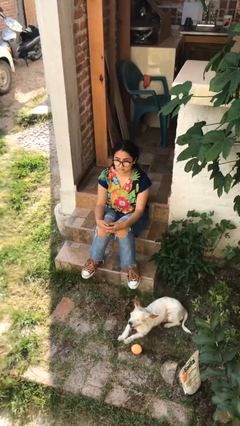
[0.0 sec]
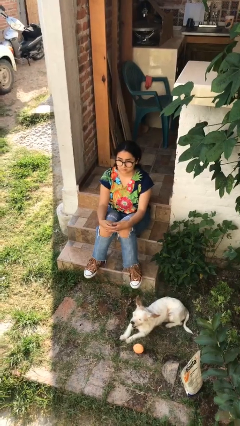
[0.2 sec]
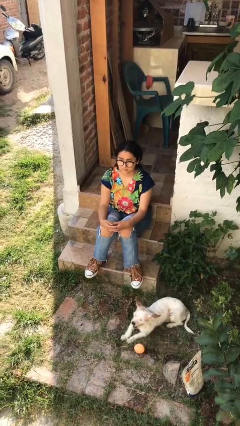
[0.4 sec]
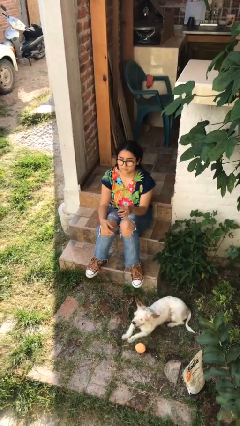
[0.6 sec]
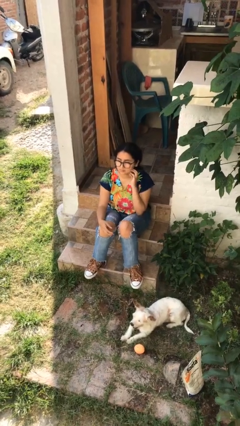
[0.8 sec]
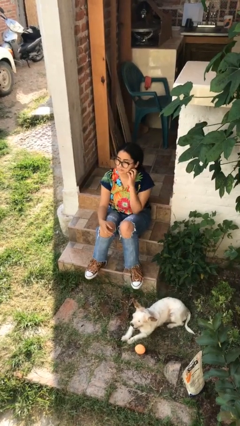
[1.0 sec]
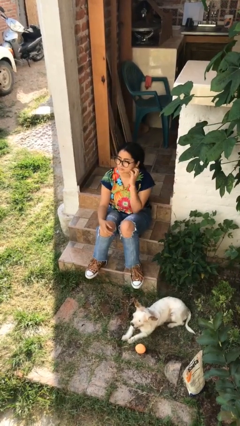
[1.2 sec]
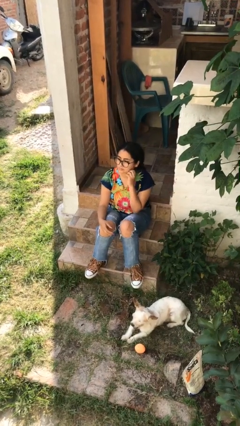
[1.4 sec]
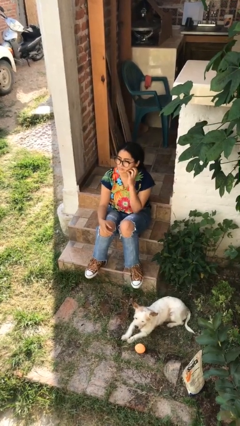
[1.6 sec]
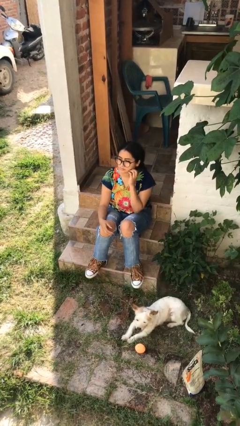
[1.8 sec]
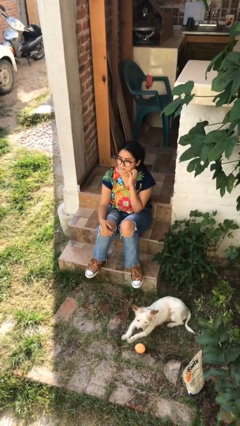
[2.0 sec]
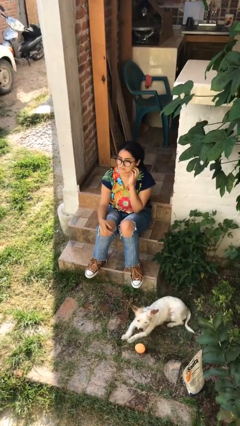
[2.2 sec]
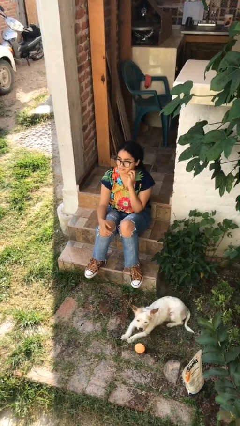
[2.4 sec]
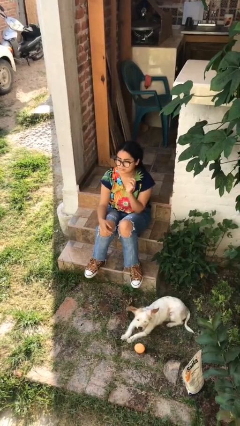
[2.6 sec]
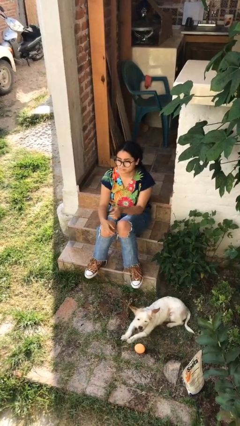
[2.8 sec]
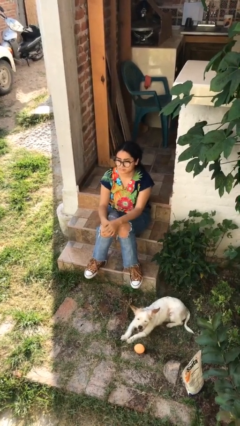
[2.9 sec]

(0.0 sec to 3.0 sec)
person scratches face

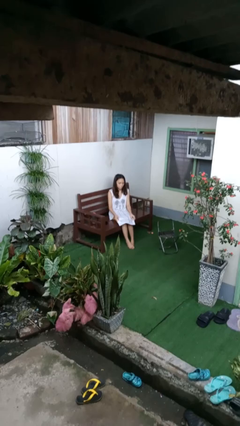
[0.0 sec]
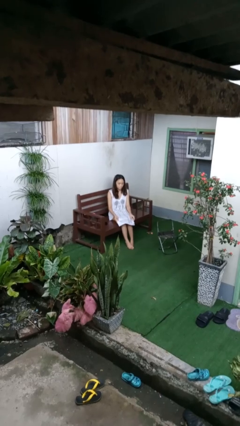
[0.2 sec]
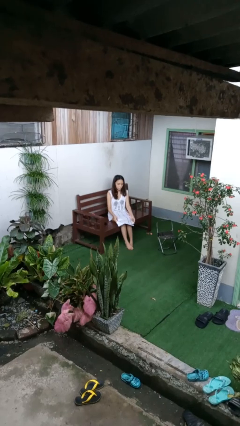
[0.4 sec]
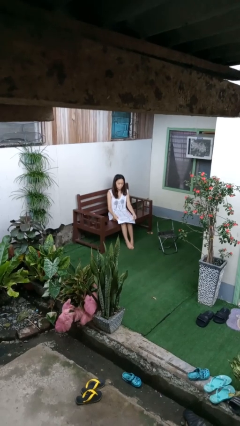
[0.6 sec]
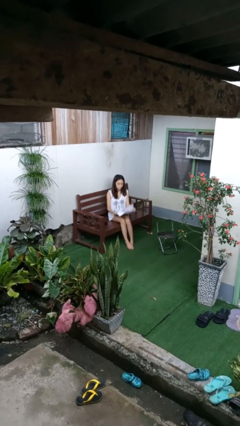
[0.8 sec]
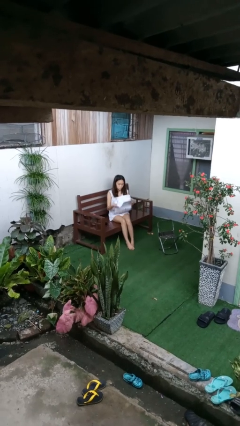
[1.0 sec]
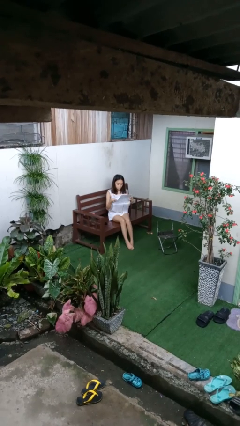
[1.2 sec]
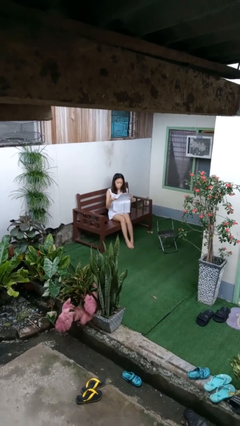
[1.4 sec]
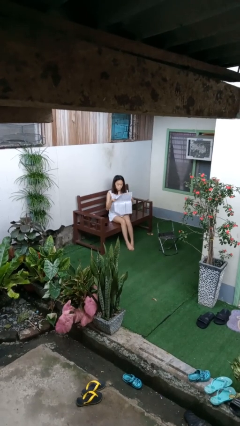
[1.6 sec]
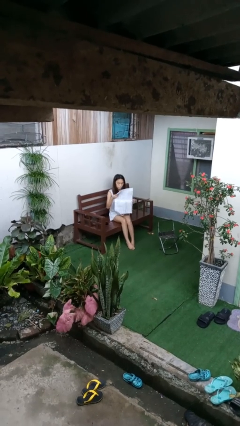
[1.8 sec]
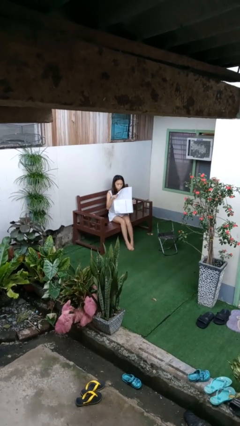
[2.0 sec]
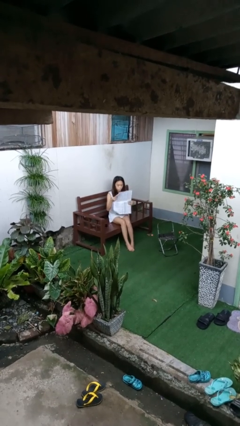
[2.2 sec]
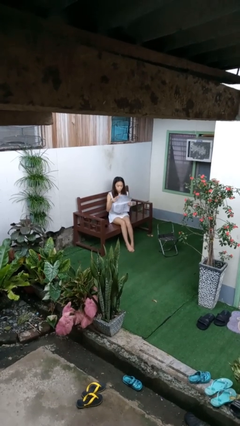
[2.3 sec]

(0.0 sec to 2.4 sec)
person reads newspaper

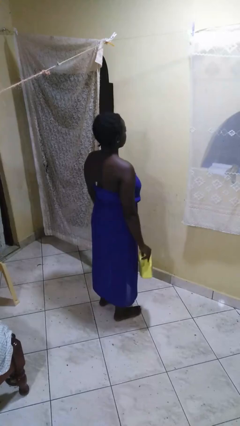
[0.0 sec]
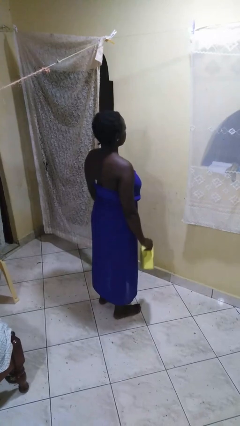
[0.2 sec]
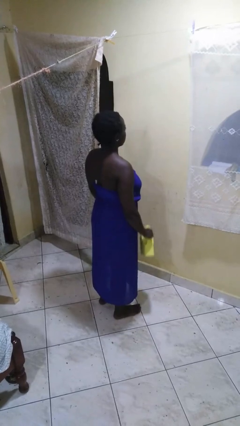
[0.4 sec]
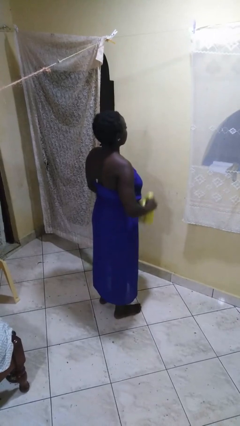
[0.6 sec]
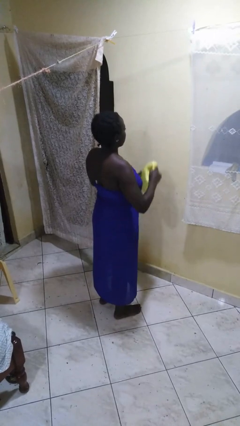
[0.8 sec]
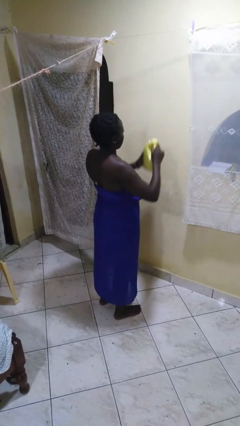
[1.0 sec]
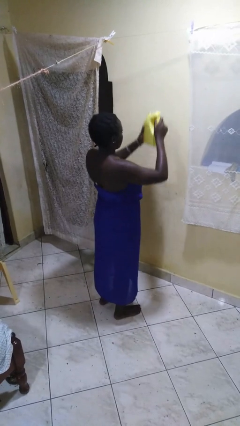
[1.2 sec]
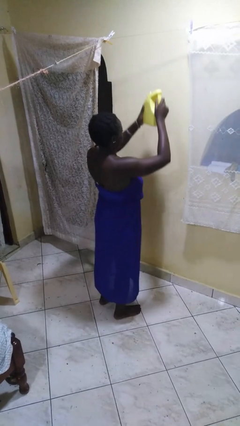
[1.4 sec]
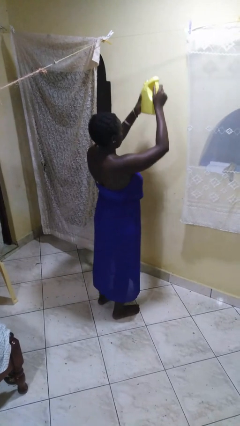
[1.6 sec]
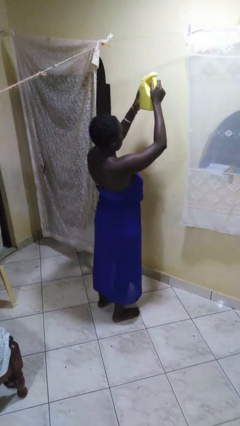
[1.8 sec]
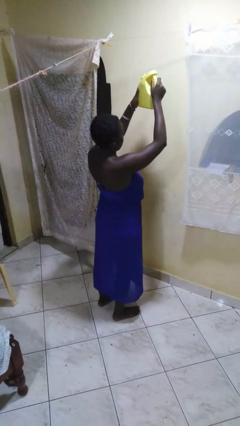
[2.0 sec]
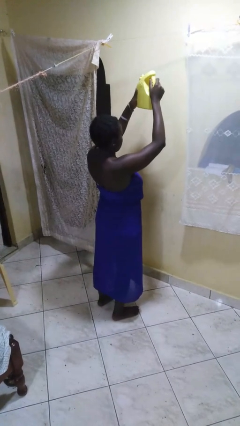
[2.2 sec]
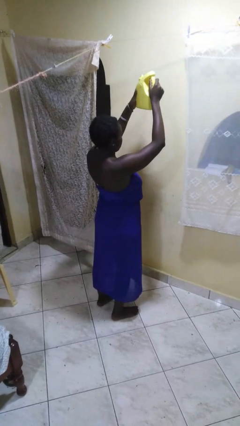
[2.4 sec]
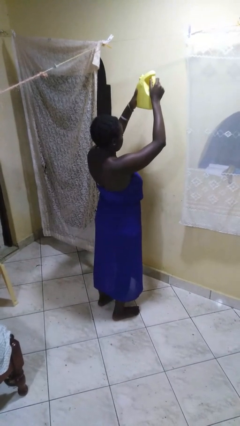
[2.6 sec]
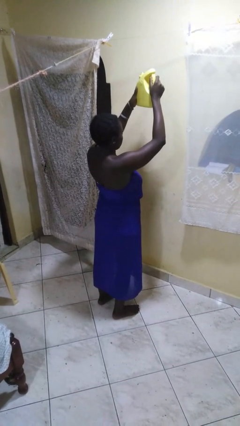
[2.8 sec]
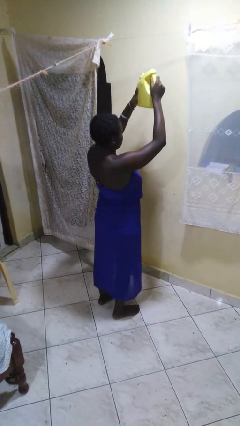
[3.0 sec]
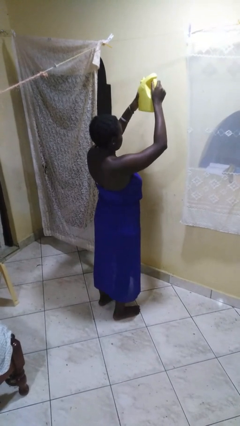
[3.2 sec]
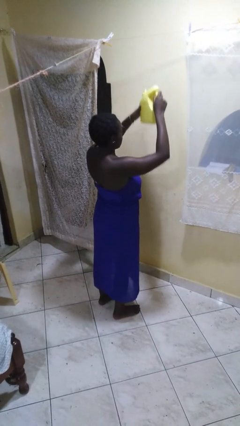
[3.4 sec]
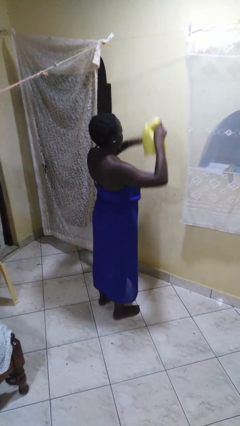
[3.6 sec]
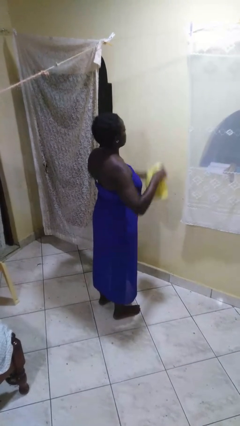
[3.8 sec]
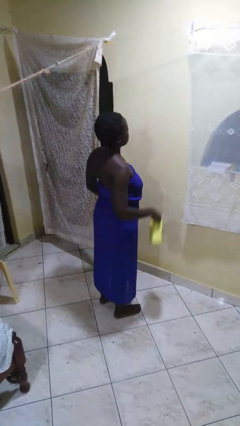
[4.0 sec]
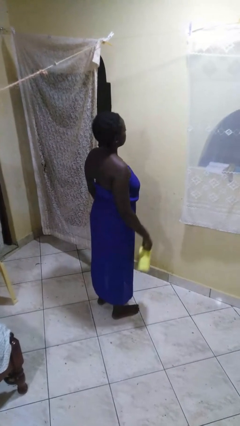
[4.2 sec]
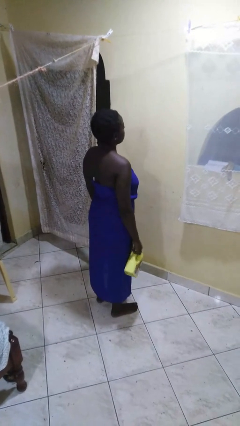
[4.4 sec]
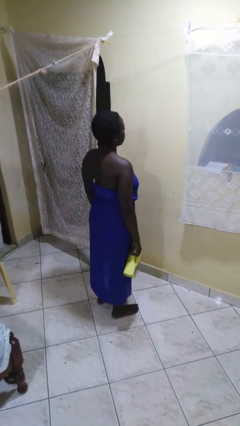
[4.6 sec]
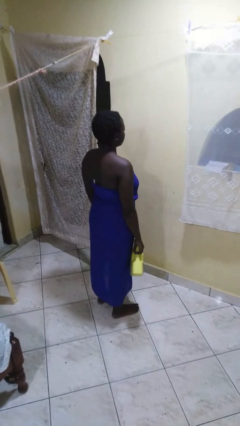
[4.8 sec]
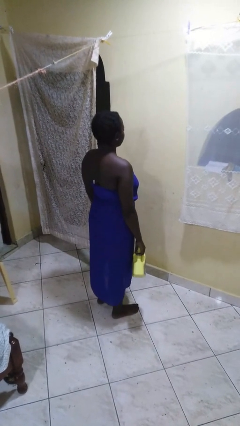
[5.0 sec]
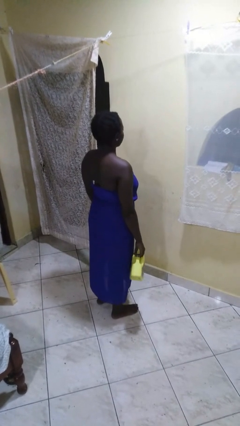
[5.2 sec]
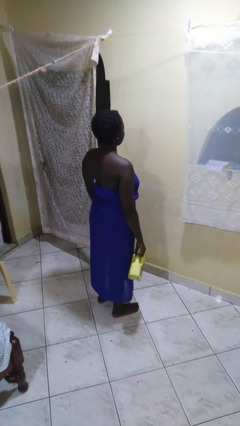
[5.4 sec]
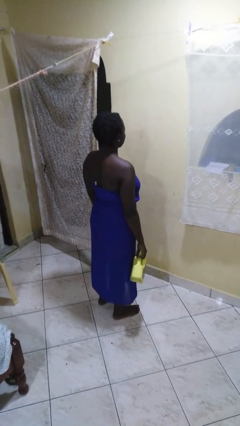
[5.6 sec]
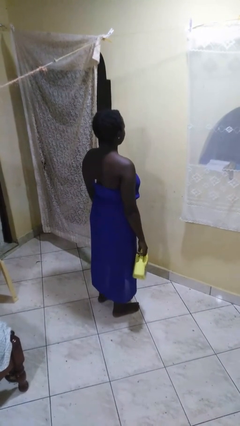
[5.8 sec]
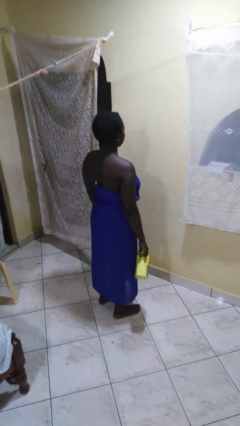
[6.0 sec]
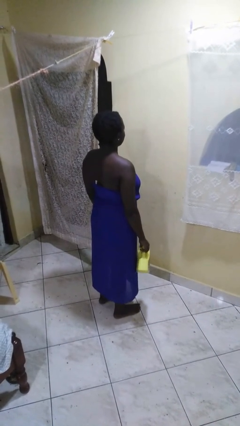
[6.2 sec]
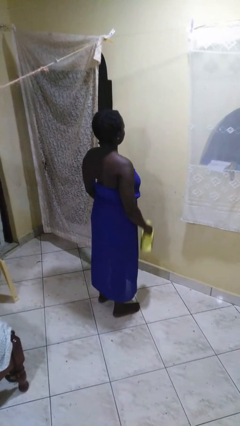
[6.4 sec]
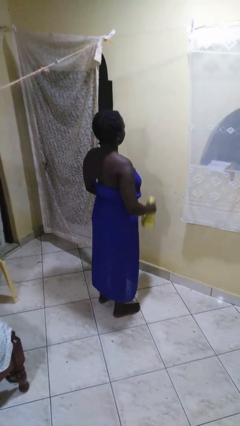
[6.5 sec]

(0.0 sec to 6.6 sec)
person holds object above head

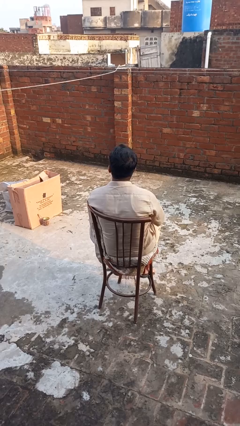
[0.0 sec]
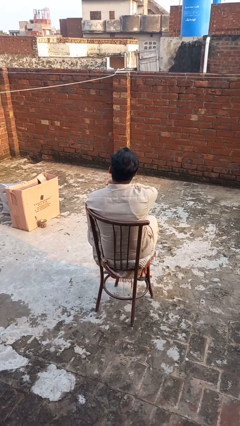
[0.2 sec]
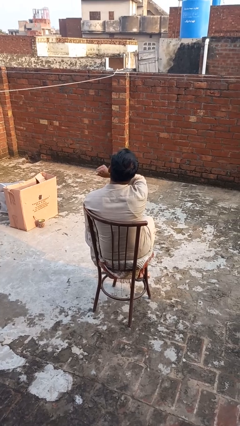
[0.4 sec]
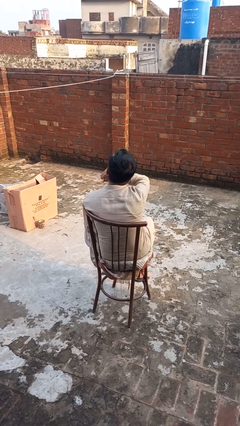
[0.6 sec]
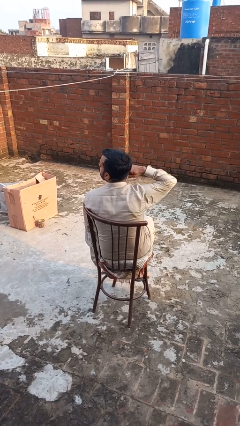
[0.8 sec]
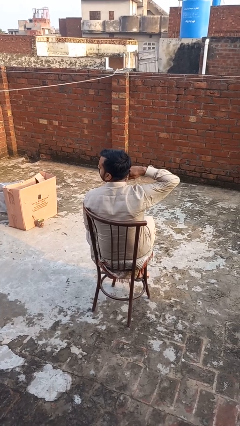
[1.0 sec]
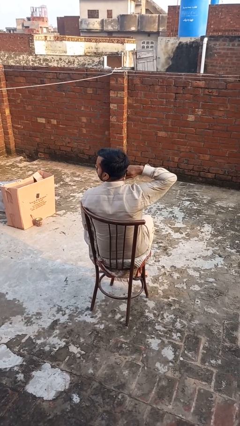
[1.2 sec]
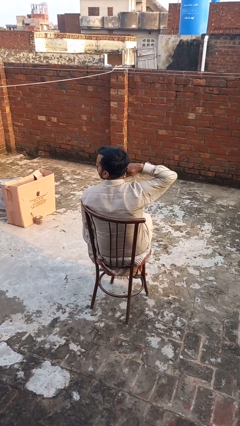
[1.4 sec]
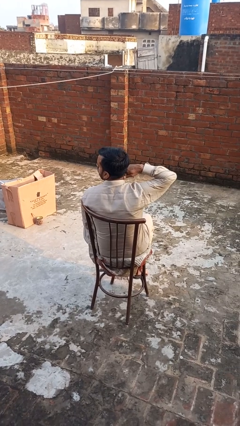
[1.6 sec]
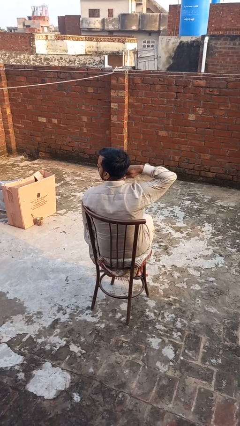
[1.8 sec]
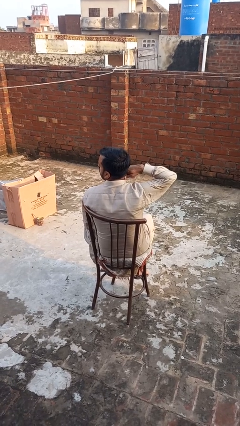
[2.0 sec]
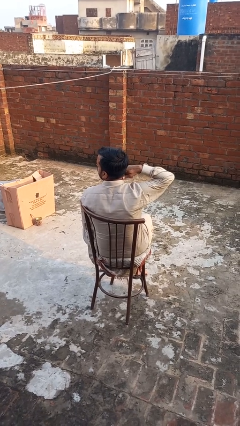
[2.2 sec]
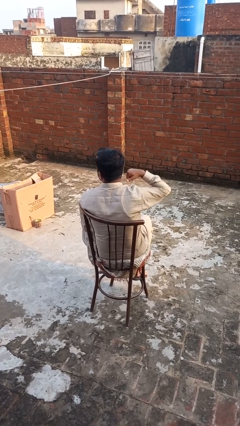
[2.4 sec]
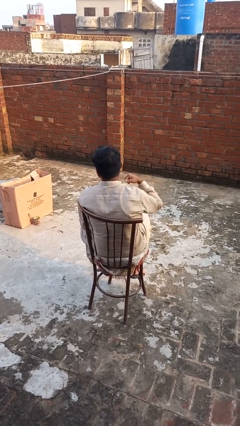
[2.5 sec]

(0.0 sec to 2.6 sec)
person gestures cut

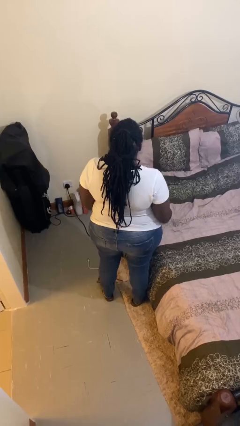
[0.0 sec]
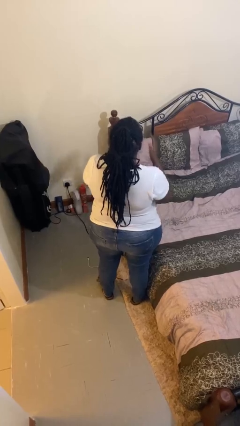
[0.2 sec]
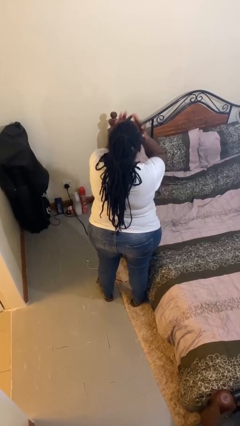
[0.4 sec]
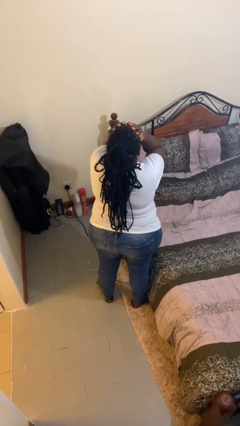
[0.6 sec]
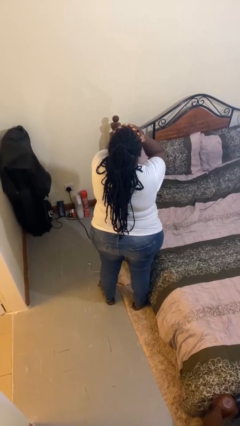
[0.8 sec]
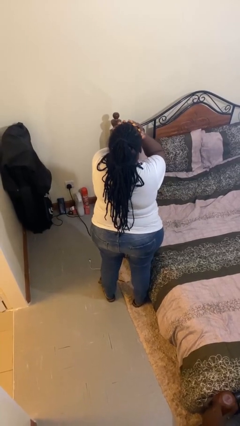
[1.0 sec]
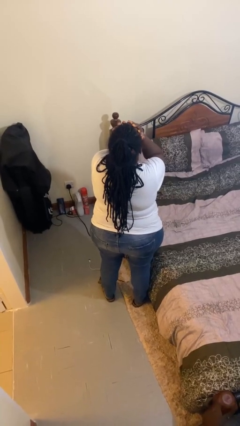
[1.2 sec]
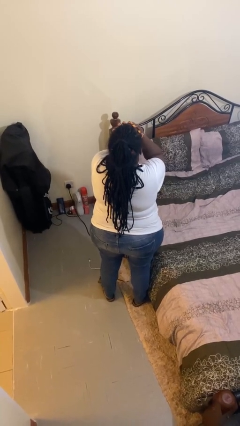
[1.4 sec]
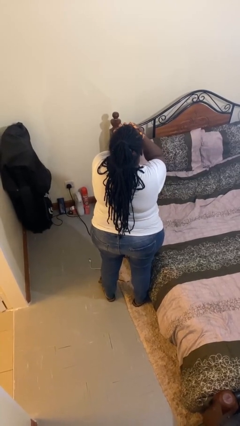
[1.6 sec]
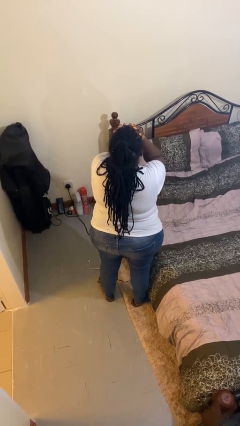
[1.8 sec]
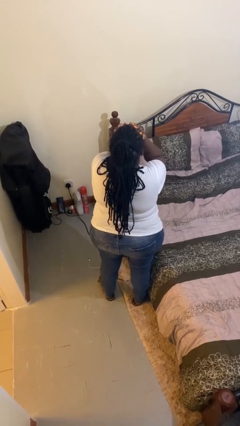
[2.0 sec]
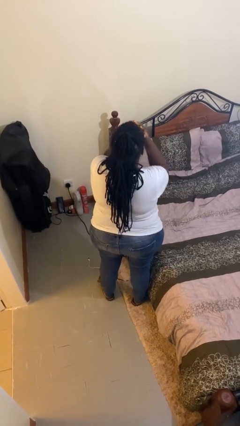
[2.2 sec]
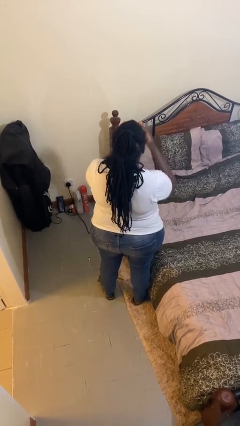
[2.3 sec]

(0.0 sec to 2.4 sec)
person covers face with hands

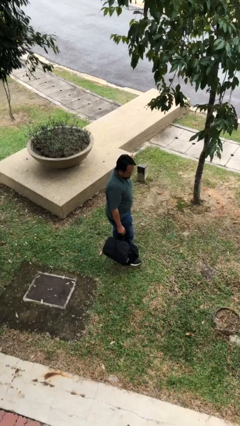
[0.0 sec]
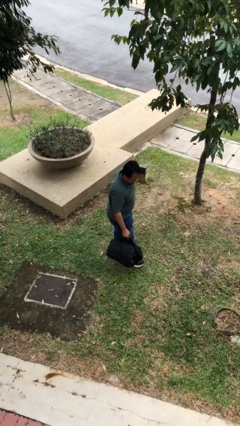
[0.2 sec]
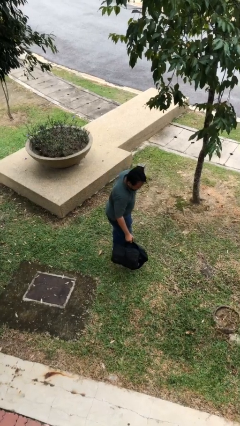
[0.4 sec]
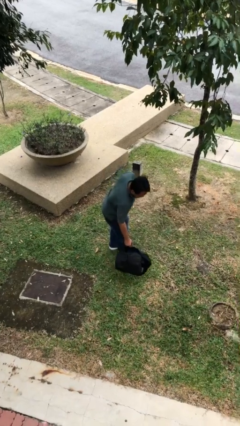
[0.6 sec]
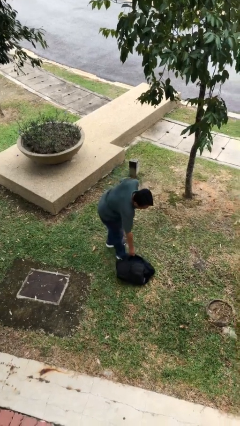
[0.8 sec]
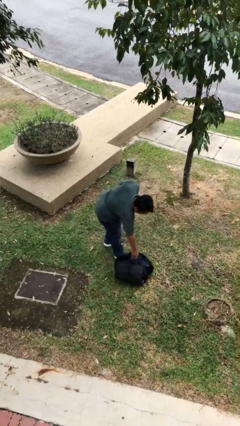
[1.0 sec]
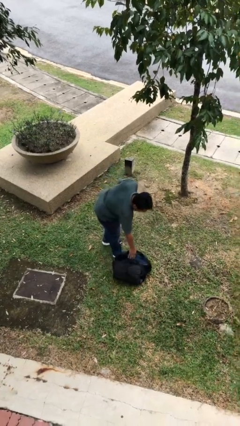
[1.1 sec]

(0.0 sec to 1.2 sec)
person puts down object on floor
